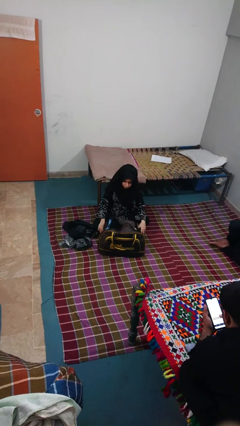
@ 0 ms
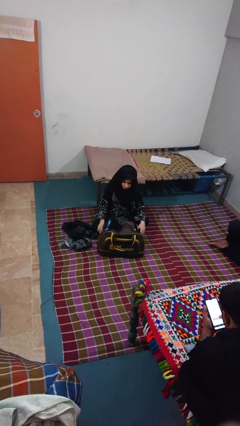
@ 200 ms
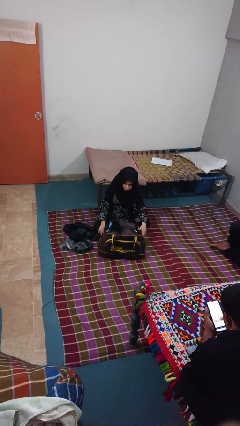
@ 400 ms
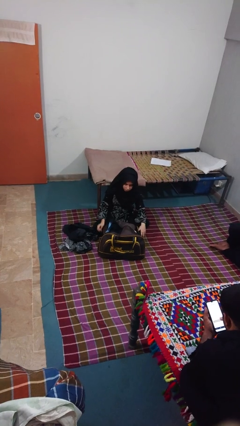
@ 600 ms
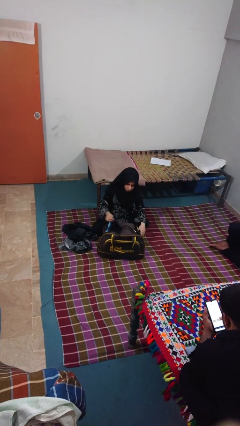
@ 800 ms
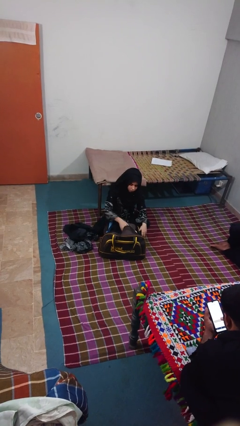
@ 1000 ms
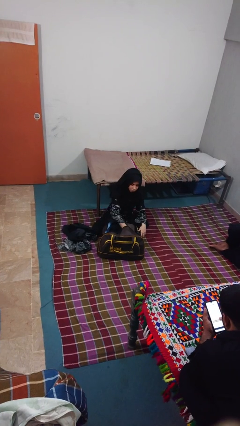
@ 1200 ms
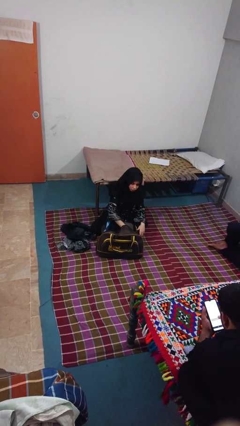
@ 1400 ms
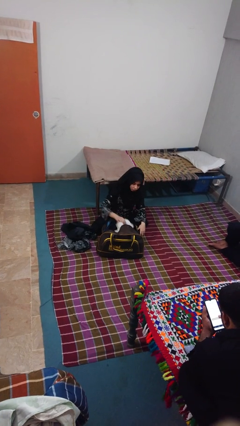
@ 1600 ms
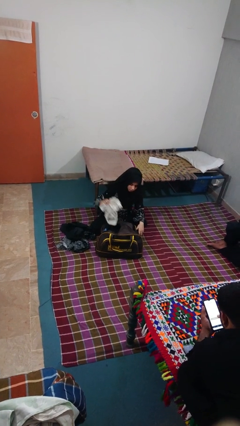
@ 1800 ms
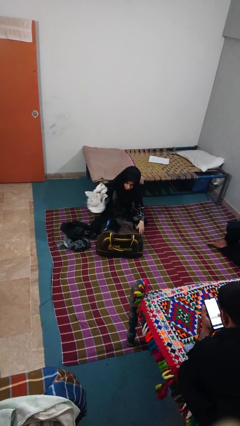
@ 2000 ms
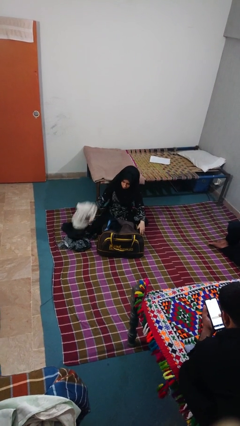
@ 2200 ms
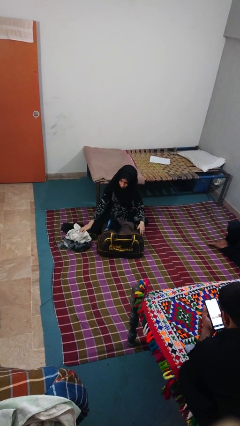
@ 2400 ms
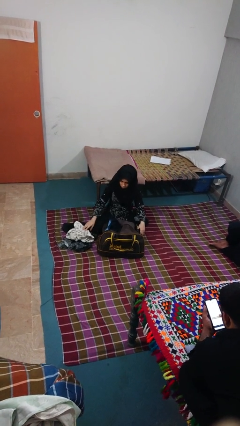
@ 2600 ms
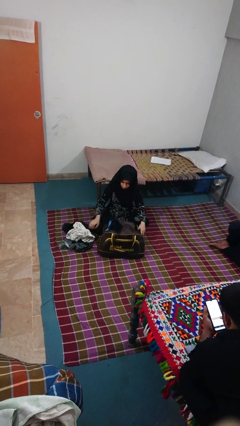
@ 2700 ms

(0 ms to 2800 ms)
person unloads clothes from suitcase

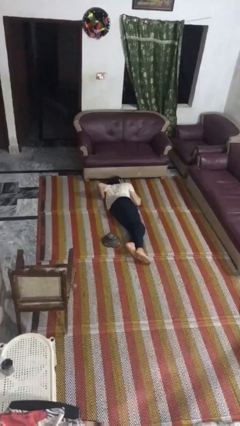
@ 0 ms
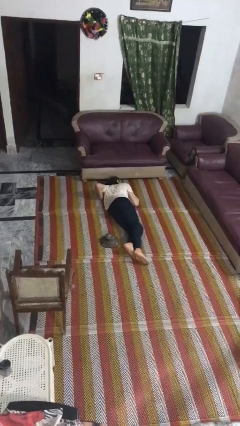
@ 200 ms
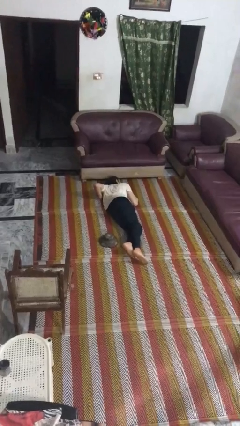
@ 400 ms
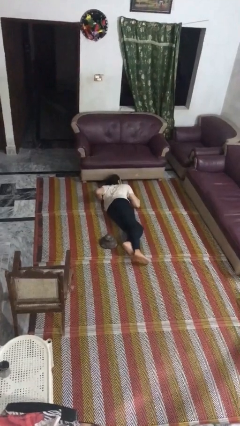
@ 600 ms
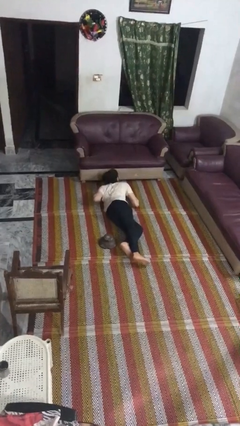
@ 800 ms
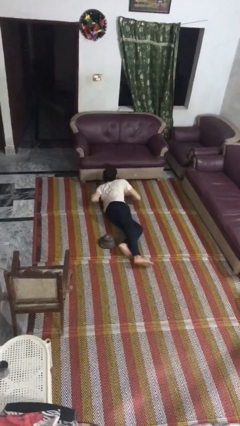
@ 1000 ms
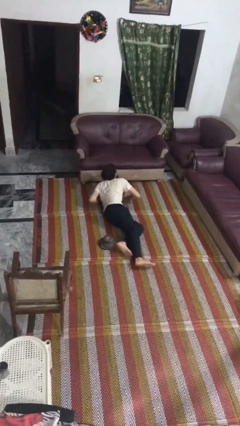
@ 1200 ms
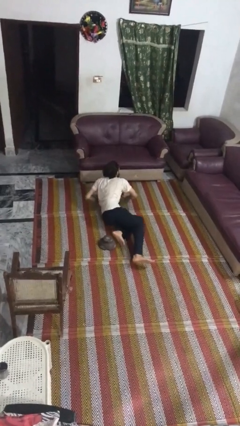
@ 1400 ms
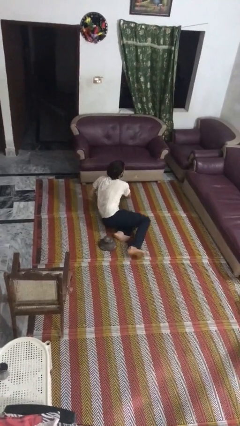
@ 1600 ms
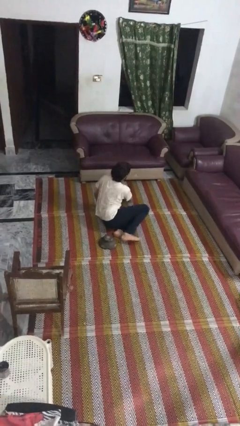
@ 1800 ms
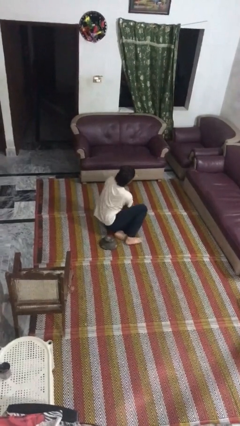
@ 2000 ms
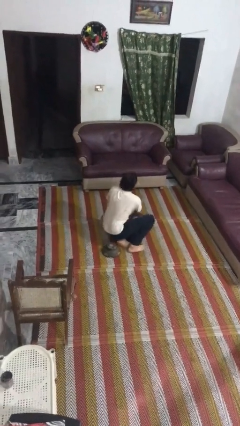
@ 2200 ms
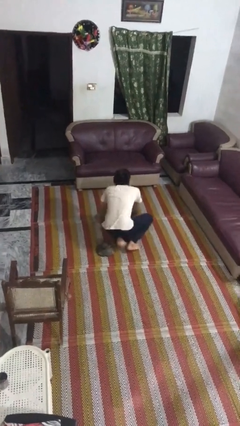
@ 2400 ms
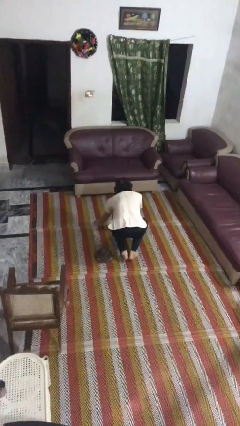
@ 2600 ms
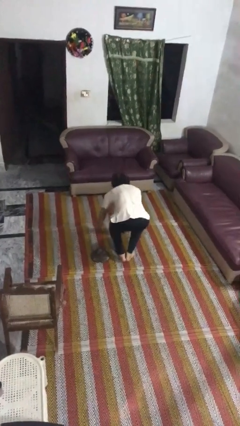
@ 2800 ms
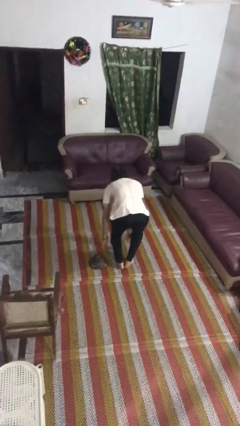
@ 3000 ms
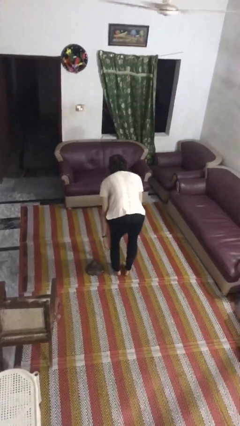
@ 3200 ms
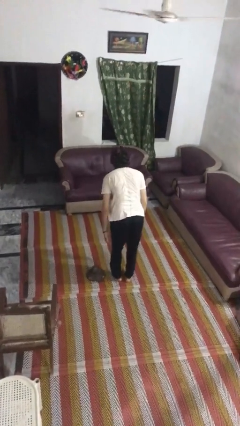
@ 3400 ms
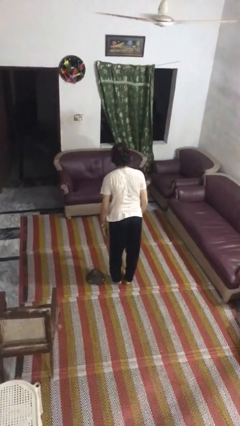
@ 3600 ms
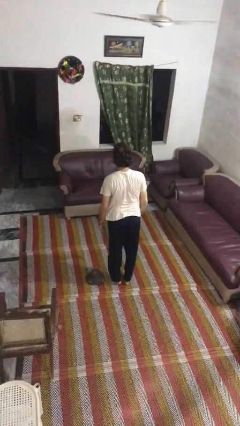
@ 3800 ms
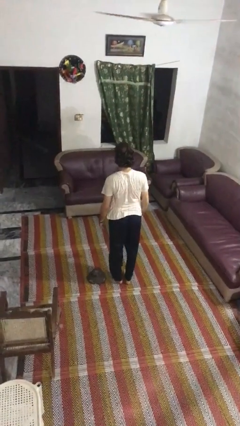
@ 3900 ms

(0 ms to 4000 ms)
person stands up from floor

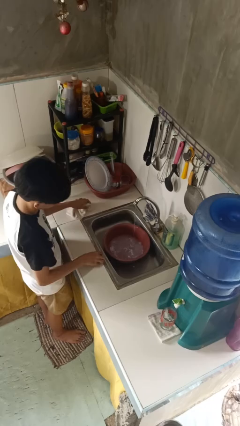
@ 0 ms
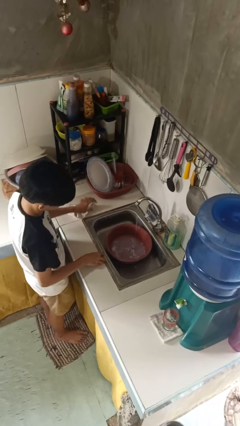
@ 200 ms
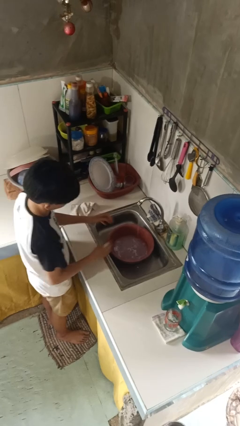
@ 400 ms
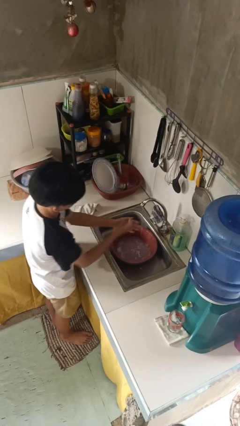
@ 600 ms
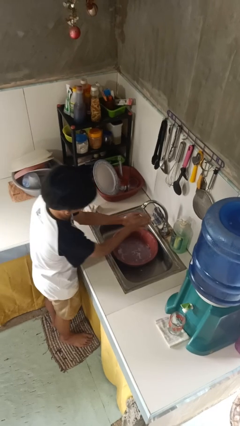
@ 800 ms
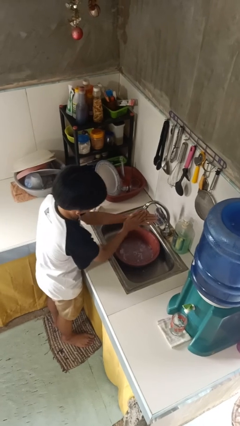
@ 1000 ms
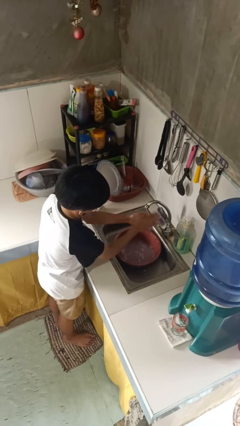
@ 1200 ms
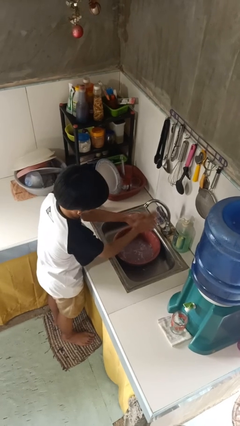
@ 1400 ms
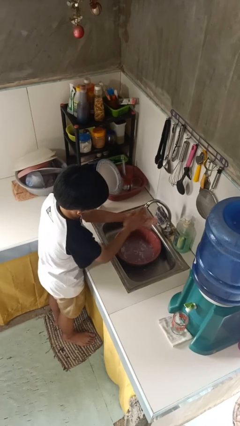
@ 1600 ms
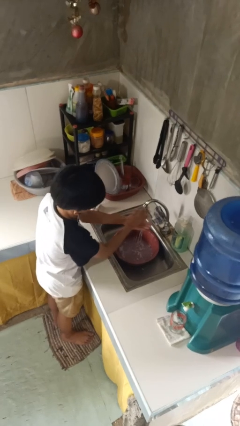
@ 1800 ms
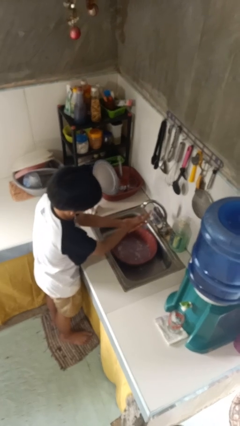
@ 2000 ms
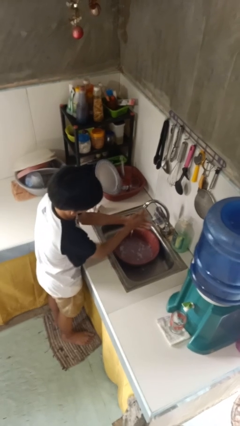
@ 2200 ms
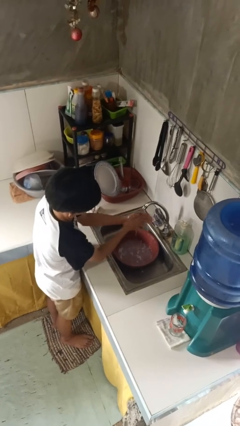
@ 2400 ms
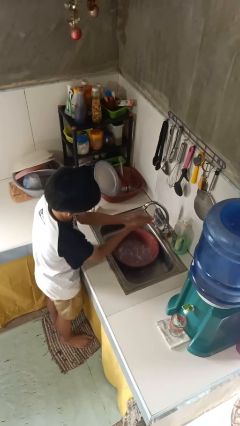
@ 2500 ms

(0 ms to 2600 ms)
person washes hands

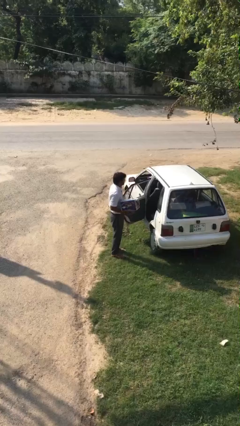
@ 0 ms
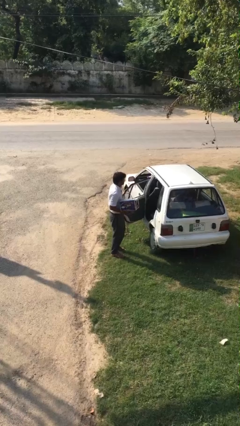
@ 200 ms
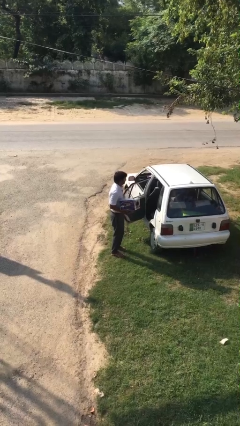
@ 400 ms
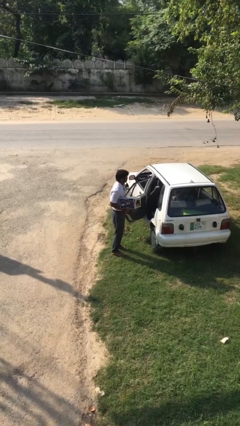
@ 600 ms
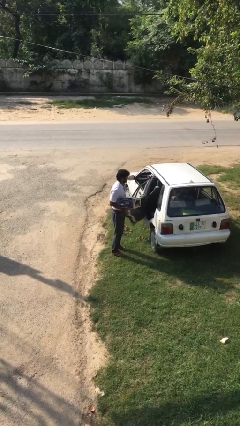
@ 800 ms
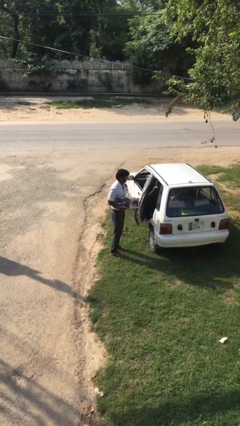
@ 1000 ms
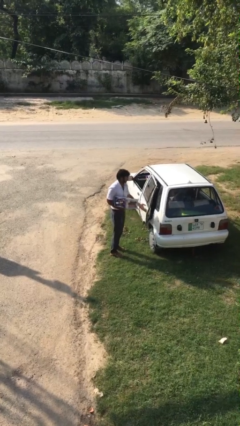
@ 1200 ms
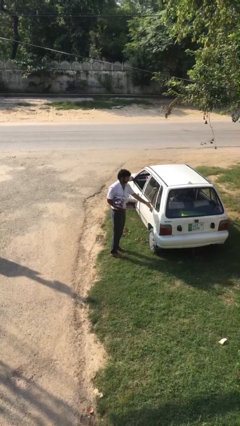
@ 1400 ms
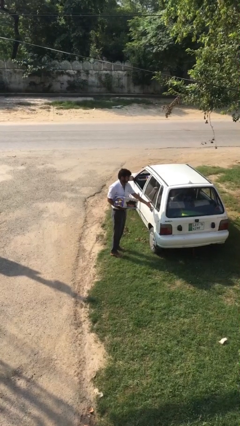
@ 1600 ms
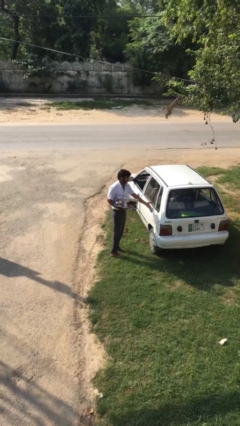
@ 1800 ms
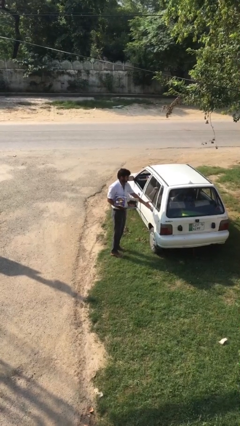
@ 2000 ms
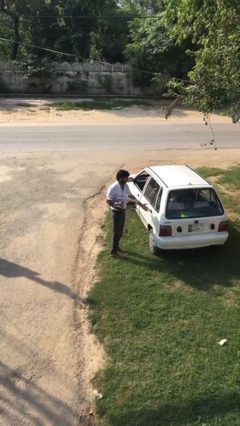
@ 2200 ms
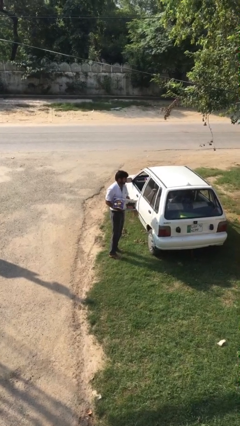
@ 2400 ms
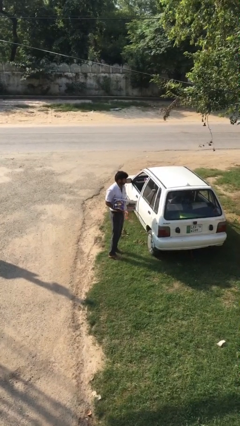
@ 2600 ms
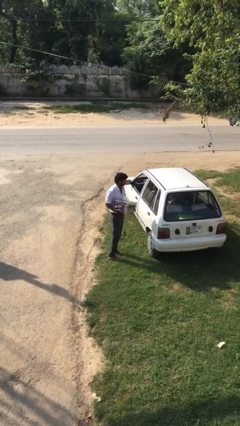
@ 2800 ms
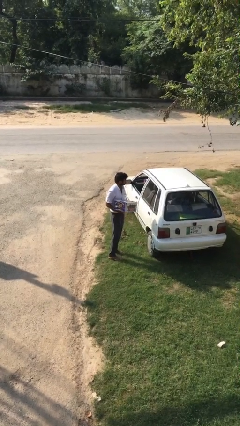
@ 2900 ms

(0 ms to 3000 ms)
person closes car door

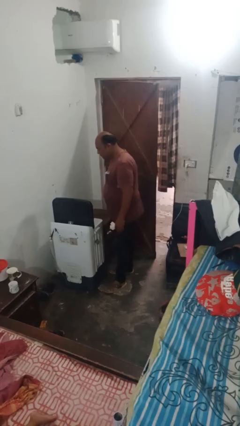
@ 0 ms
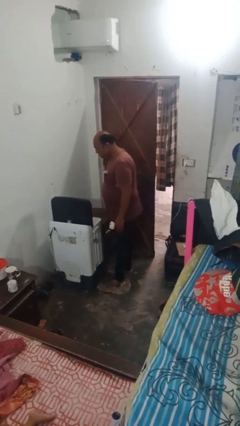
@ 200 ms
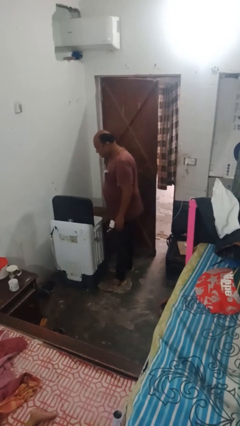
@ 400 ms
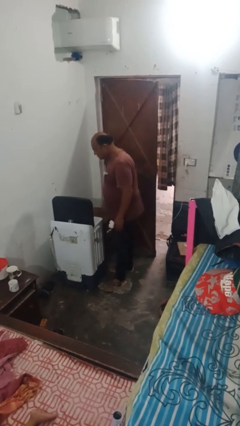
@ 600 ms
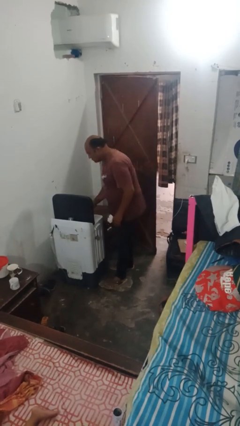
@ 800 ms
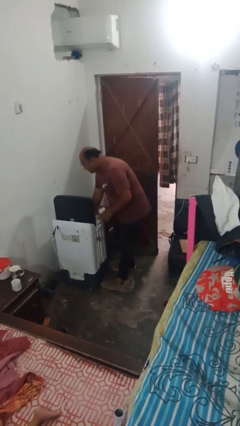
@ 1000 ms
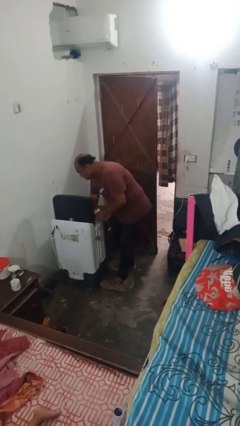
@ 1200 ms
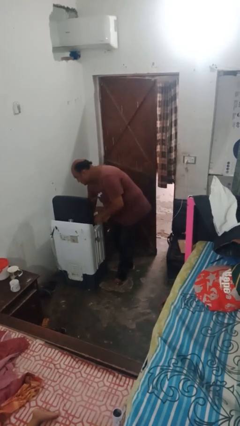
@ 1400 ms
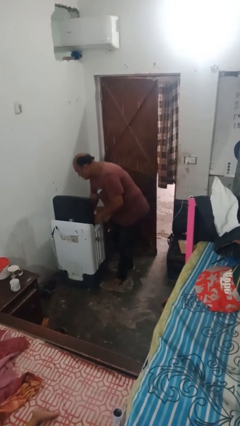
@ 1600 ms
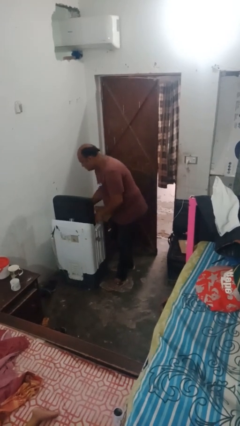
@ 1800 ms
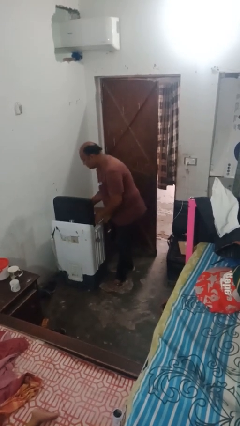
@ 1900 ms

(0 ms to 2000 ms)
person unloads dryer

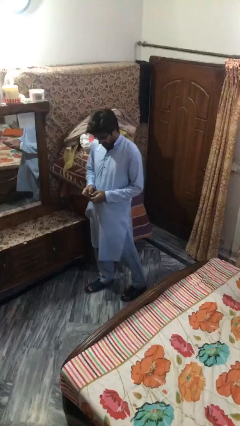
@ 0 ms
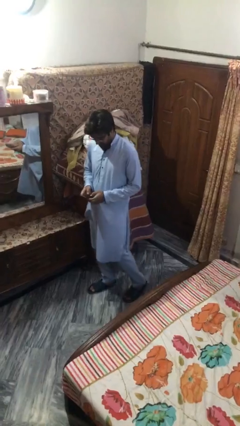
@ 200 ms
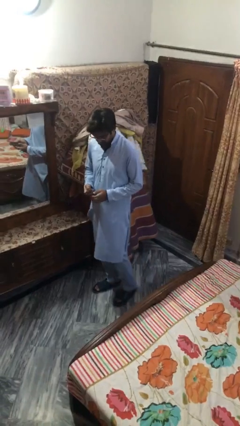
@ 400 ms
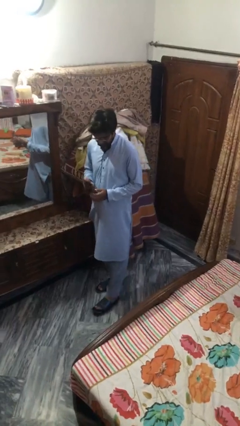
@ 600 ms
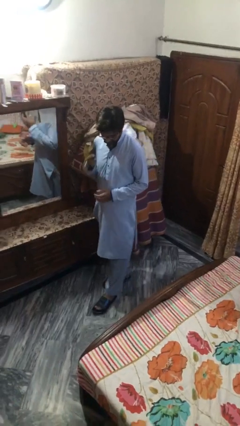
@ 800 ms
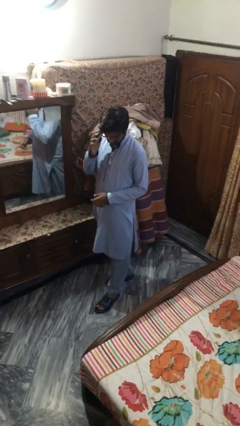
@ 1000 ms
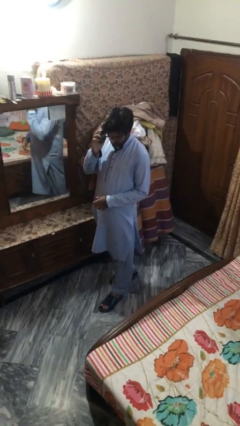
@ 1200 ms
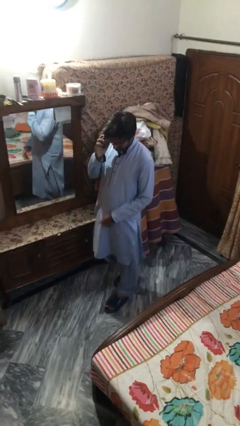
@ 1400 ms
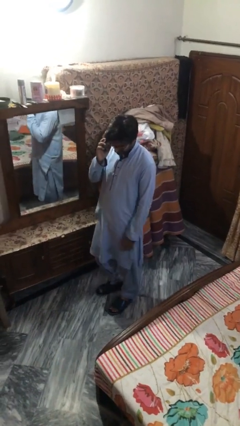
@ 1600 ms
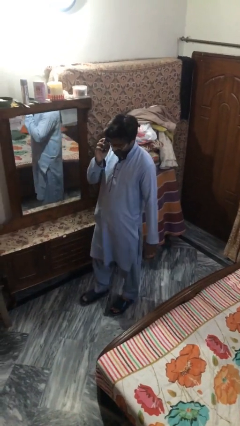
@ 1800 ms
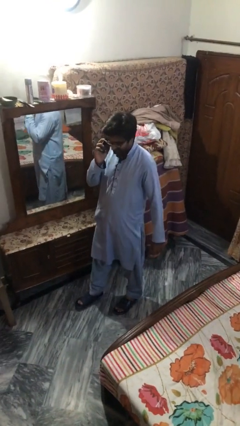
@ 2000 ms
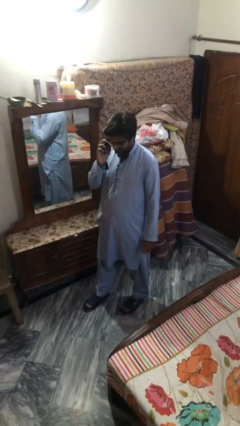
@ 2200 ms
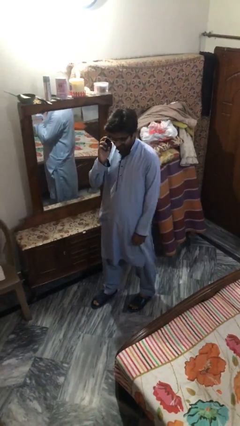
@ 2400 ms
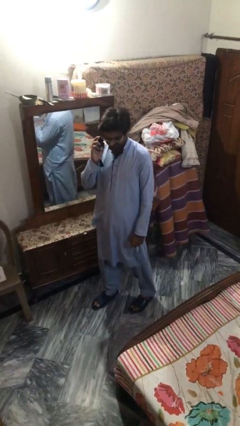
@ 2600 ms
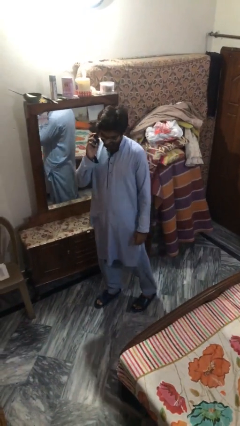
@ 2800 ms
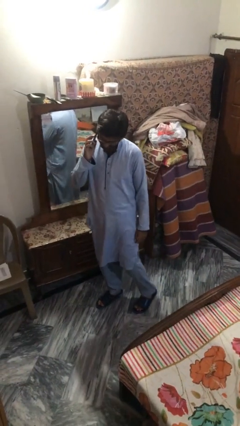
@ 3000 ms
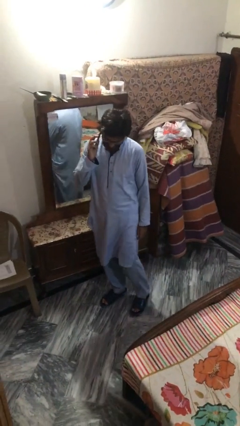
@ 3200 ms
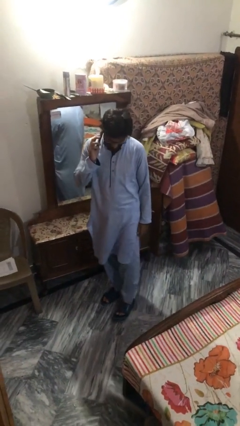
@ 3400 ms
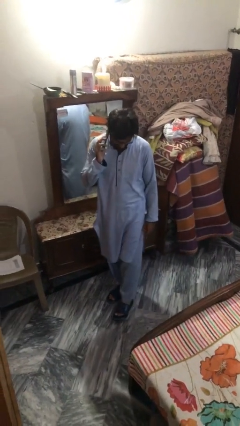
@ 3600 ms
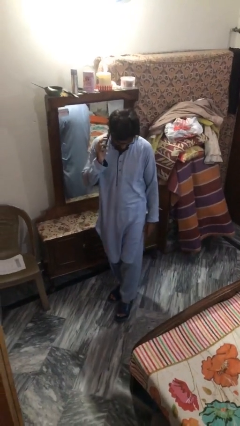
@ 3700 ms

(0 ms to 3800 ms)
person talks on phone
